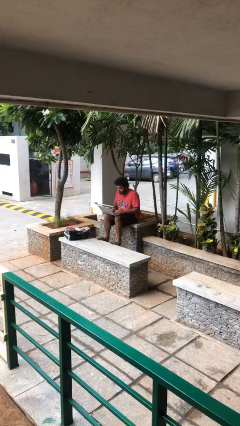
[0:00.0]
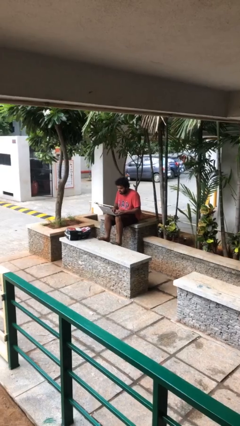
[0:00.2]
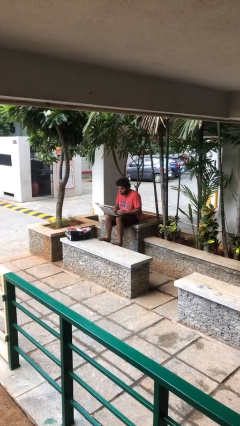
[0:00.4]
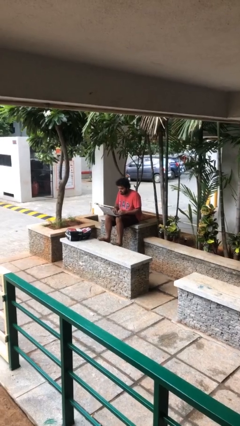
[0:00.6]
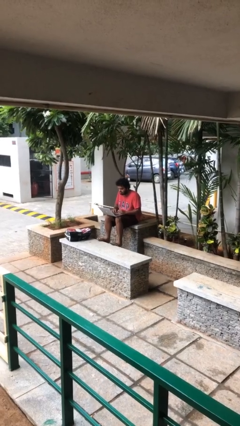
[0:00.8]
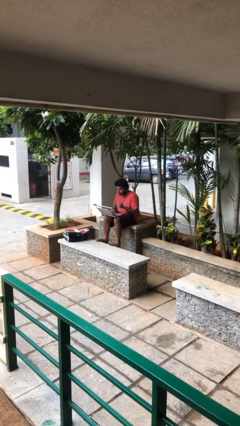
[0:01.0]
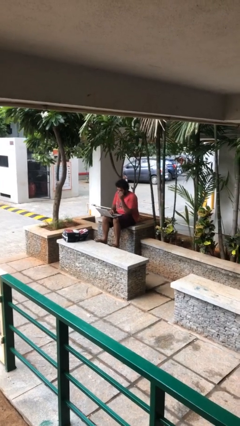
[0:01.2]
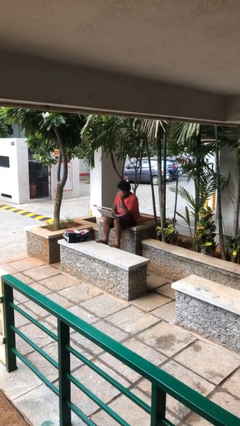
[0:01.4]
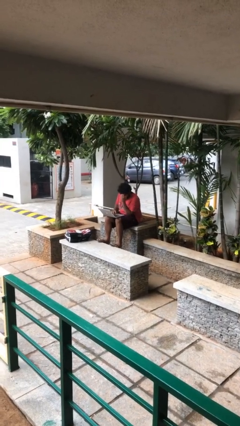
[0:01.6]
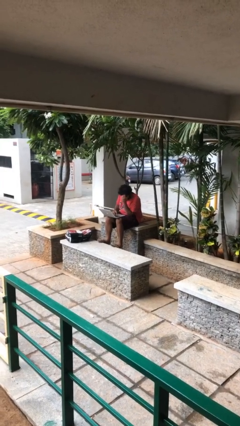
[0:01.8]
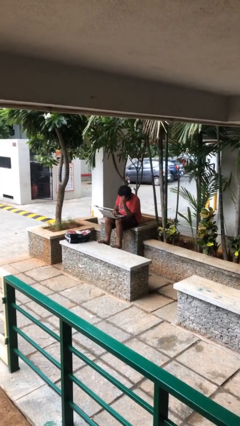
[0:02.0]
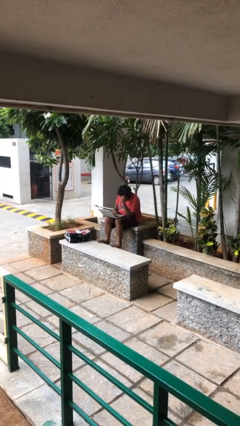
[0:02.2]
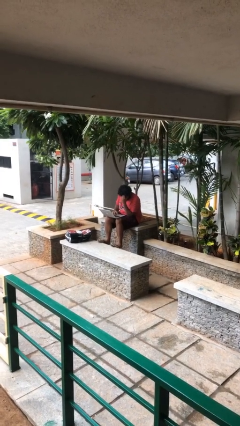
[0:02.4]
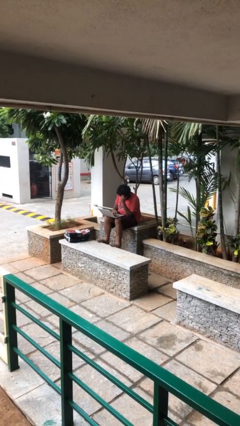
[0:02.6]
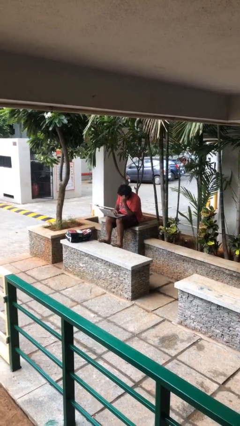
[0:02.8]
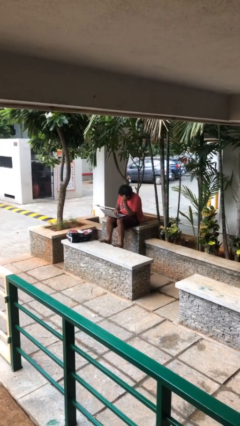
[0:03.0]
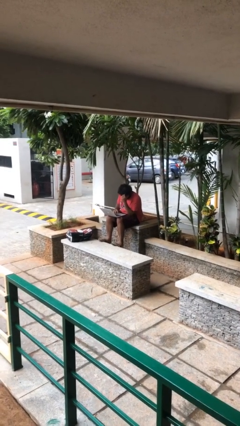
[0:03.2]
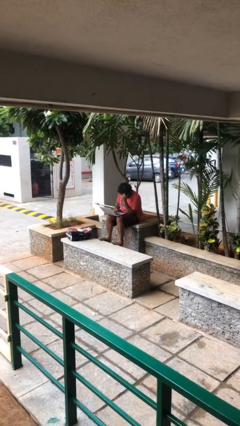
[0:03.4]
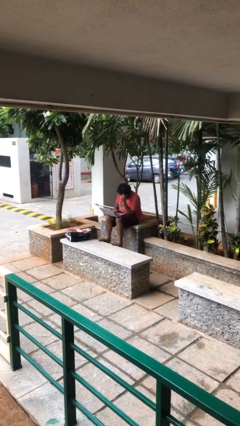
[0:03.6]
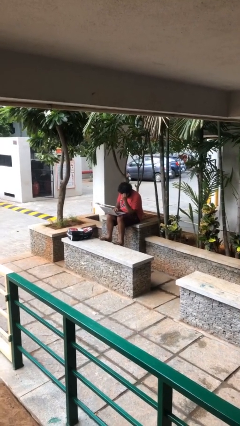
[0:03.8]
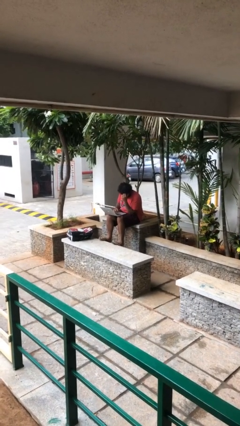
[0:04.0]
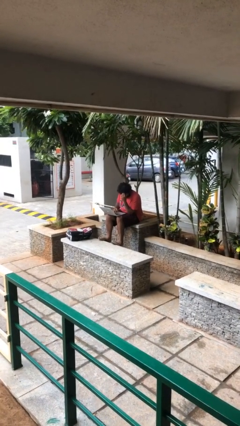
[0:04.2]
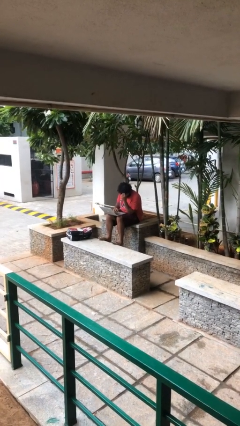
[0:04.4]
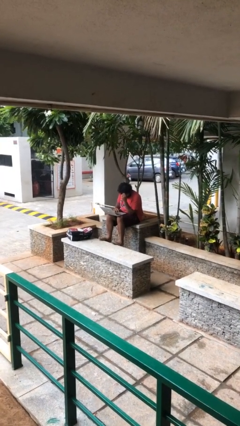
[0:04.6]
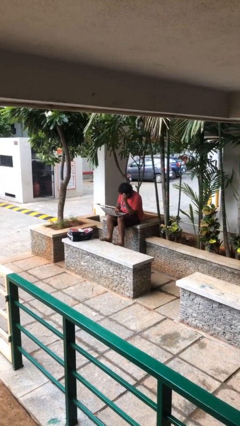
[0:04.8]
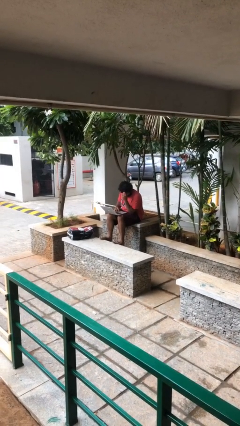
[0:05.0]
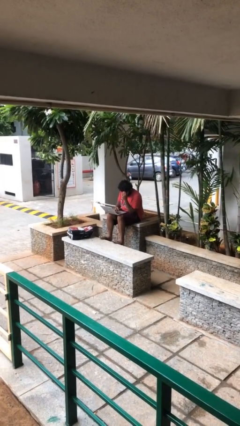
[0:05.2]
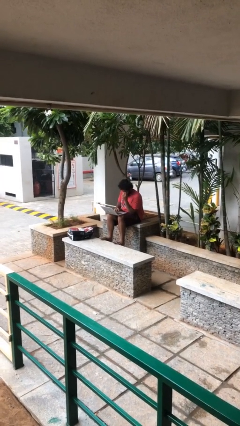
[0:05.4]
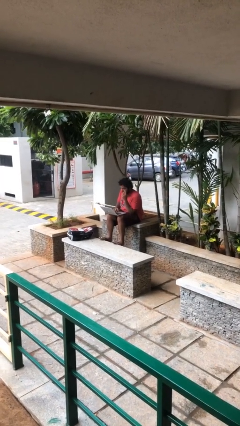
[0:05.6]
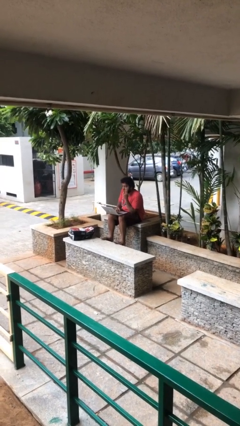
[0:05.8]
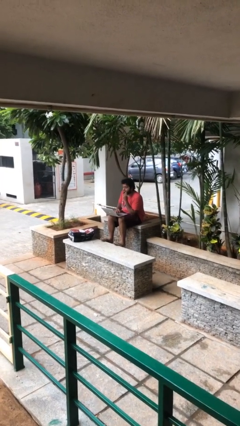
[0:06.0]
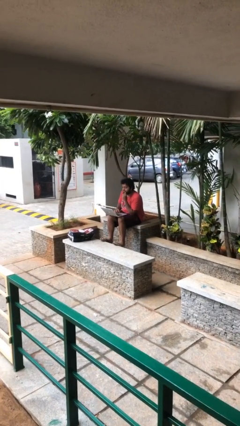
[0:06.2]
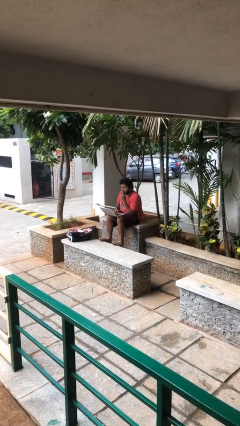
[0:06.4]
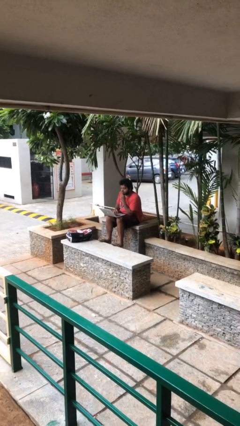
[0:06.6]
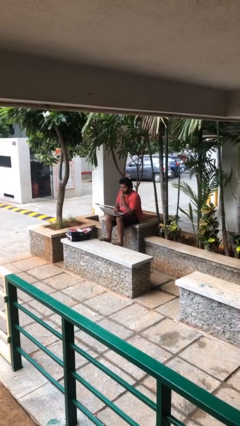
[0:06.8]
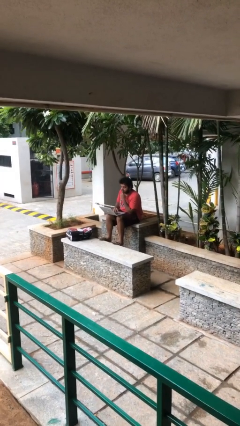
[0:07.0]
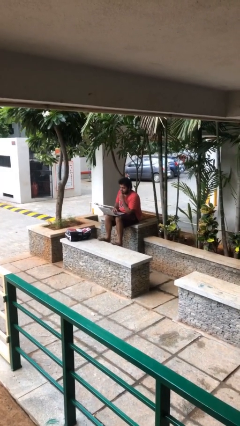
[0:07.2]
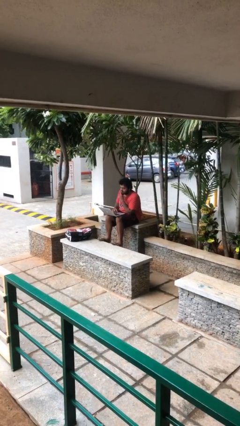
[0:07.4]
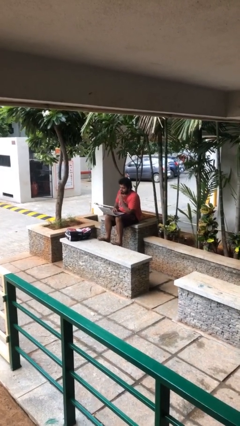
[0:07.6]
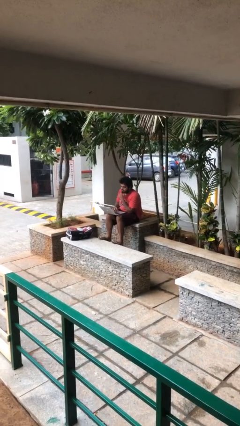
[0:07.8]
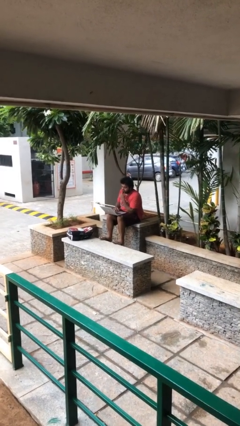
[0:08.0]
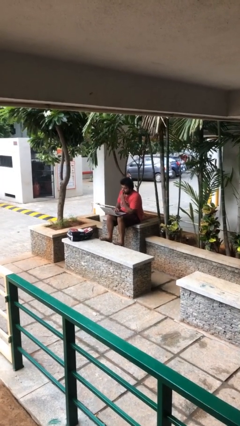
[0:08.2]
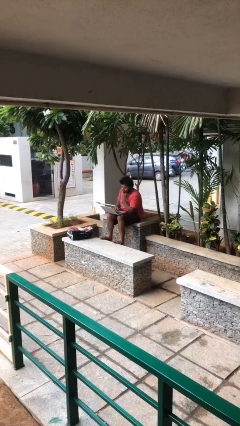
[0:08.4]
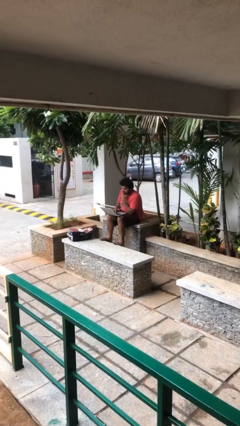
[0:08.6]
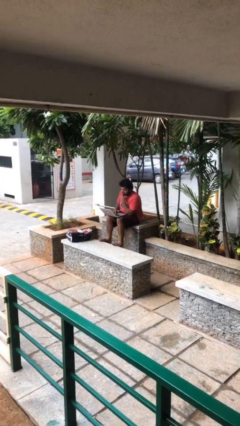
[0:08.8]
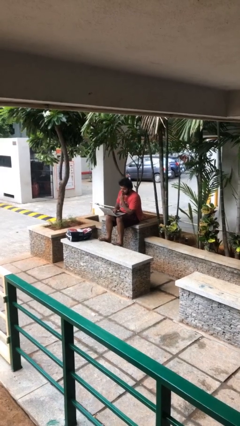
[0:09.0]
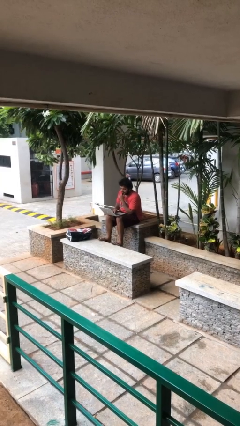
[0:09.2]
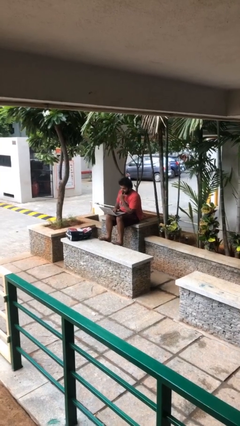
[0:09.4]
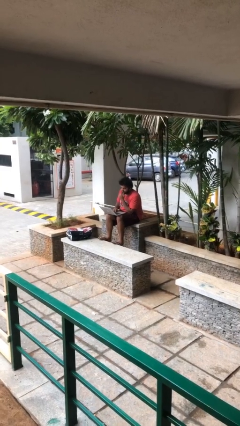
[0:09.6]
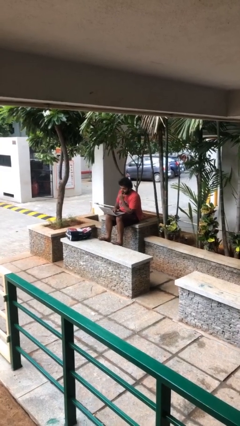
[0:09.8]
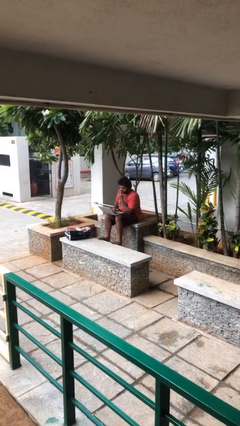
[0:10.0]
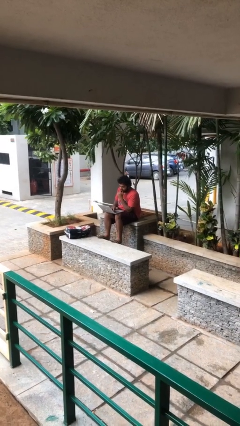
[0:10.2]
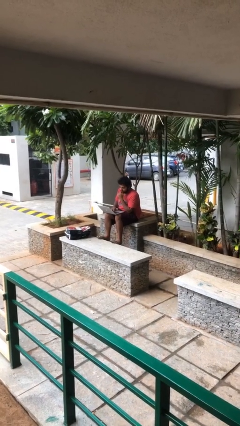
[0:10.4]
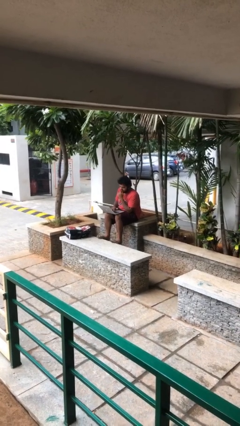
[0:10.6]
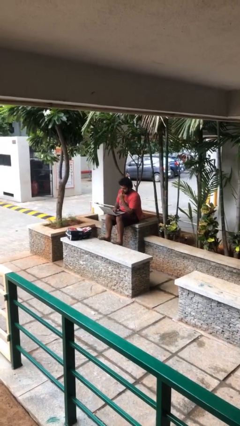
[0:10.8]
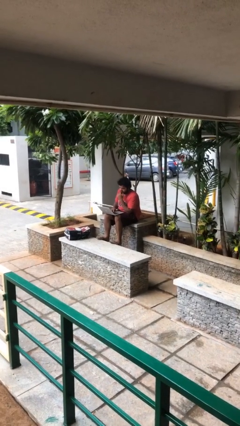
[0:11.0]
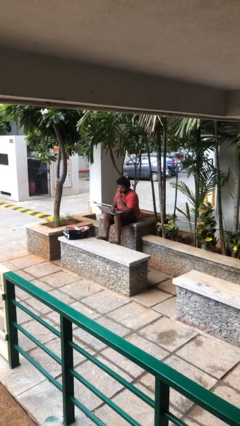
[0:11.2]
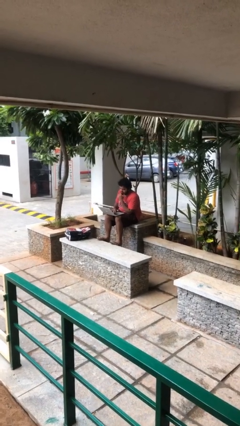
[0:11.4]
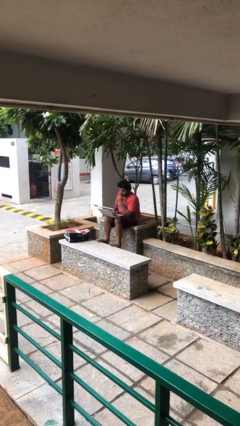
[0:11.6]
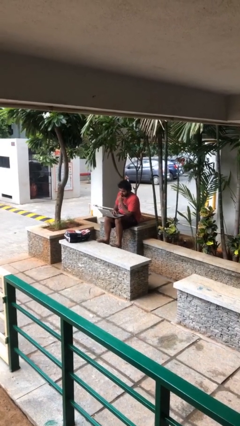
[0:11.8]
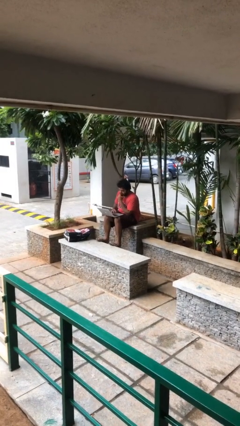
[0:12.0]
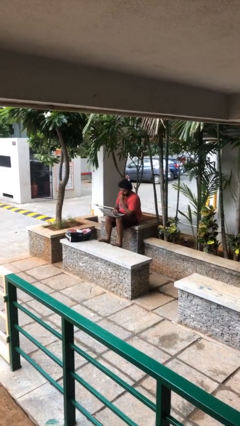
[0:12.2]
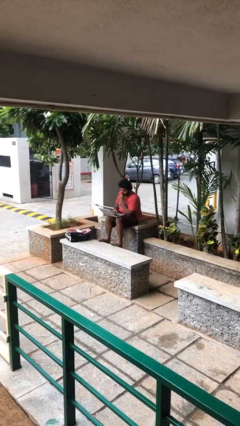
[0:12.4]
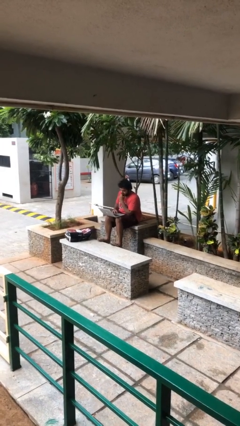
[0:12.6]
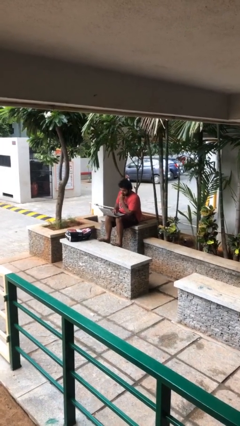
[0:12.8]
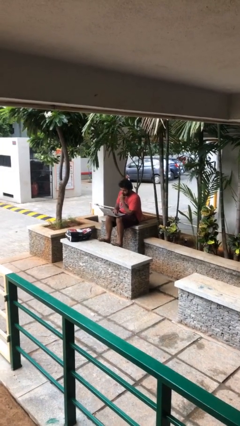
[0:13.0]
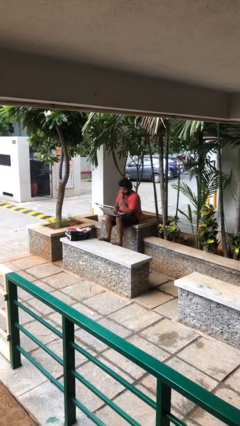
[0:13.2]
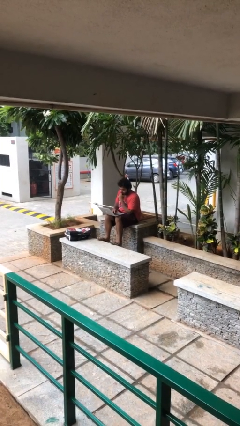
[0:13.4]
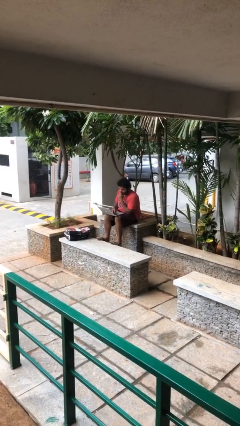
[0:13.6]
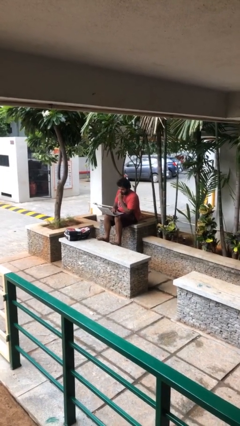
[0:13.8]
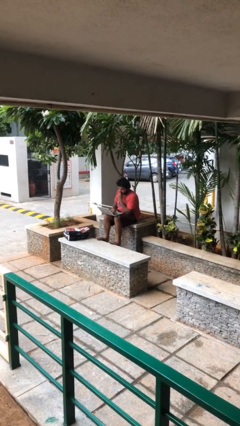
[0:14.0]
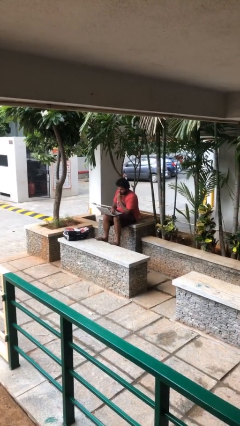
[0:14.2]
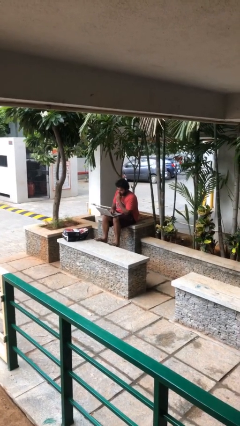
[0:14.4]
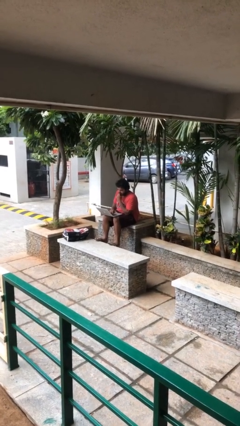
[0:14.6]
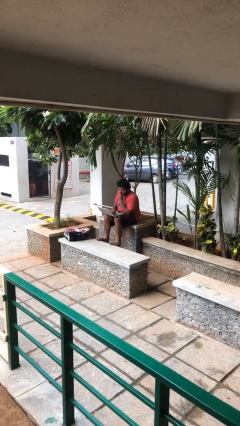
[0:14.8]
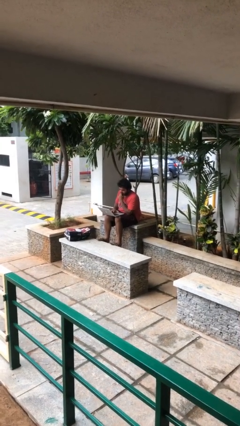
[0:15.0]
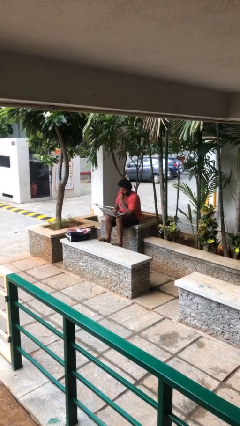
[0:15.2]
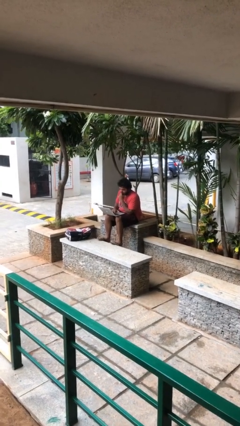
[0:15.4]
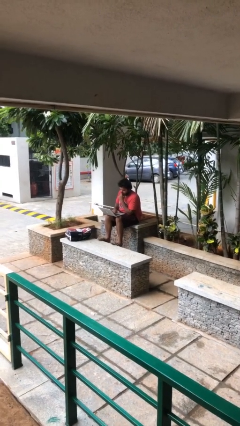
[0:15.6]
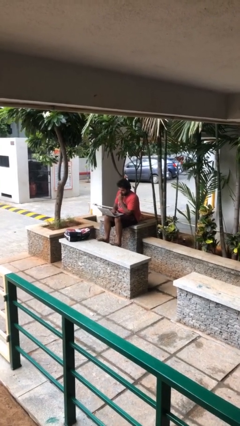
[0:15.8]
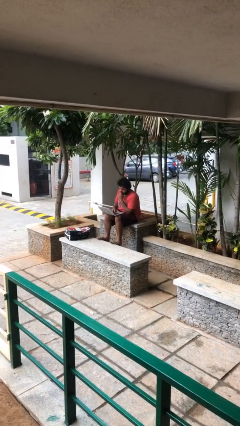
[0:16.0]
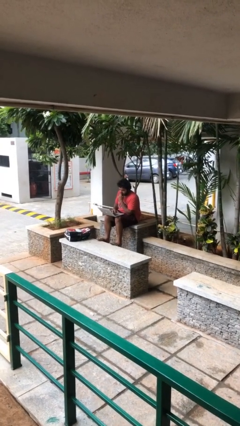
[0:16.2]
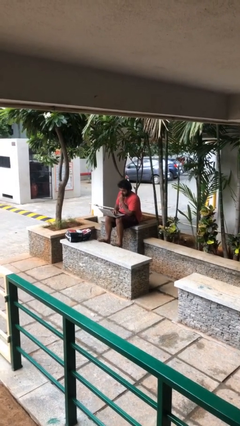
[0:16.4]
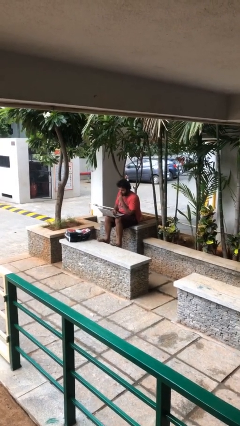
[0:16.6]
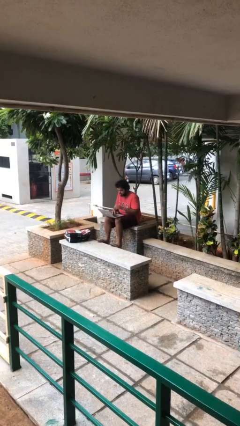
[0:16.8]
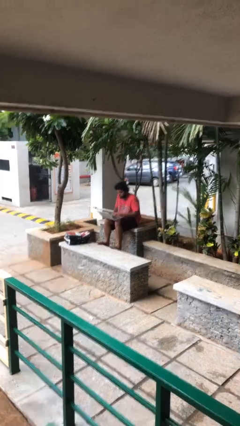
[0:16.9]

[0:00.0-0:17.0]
person interacts with laptop

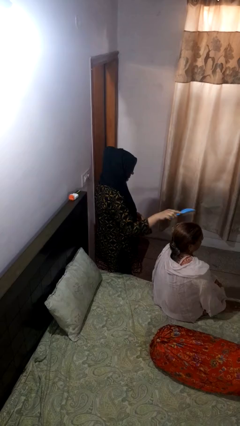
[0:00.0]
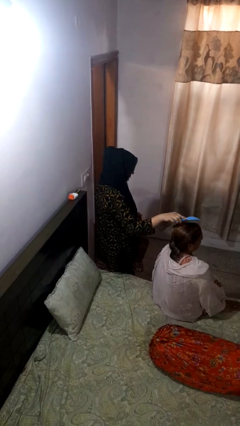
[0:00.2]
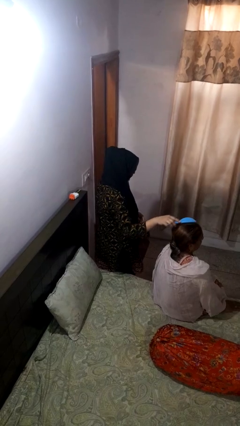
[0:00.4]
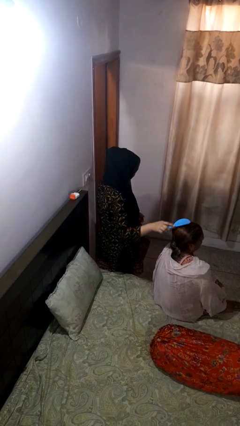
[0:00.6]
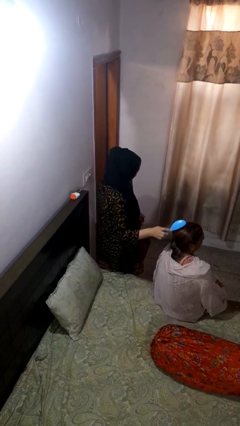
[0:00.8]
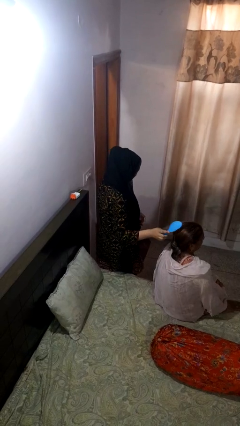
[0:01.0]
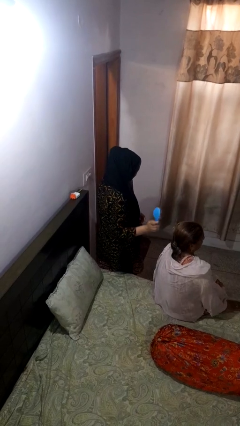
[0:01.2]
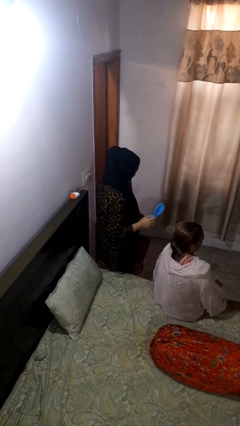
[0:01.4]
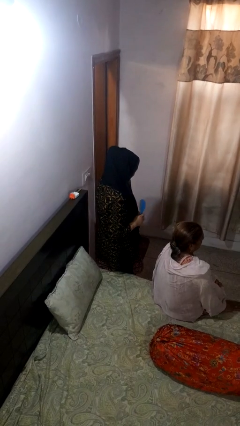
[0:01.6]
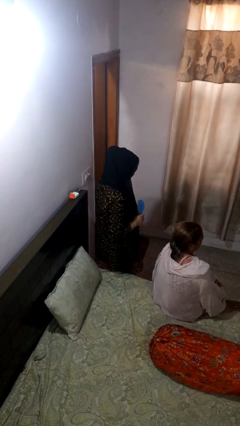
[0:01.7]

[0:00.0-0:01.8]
person brushes hair of person
